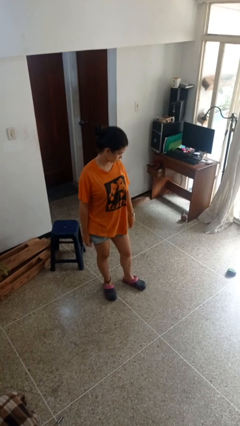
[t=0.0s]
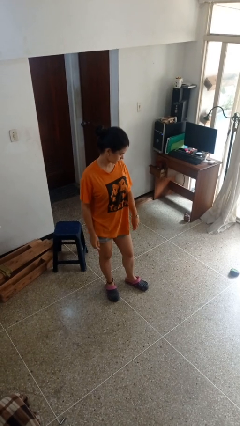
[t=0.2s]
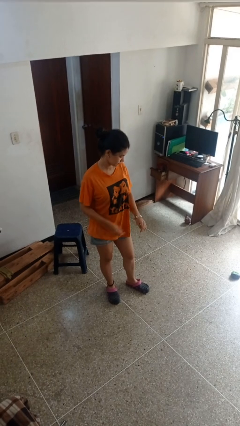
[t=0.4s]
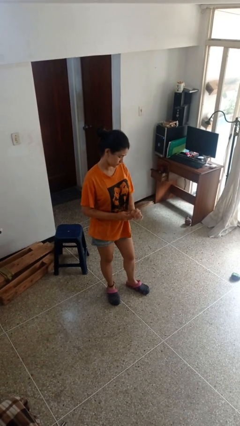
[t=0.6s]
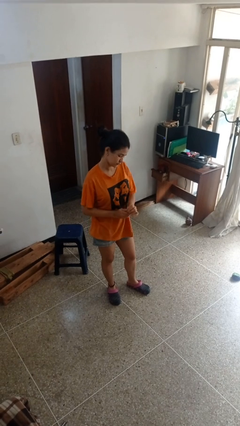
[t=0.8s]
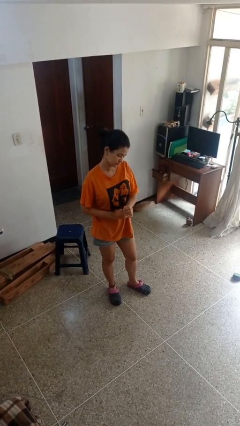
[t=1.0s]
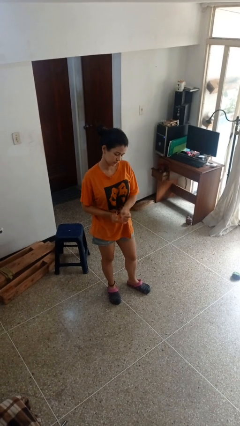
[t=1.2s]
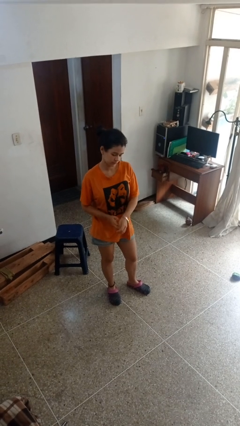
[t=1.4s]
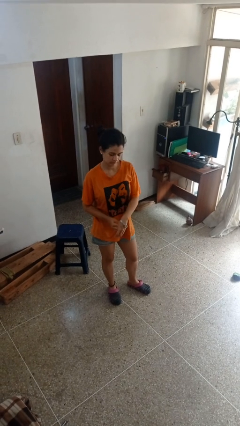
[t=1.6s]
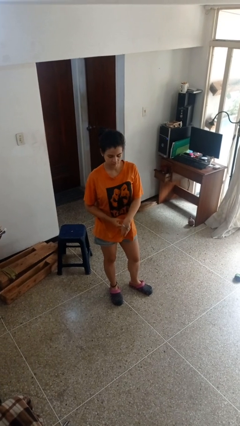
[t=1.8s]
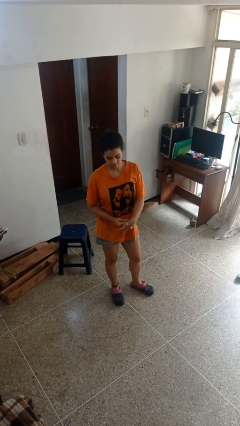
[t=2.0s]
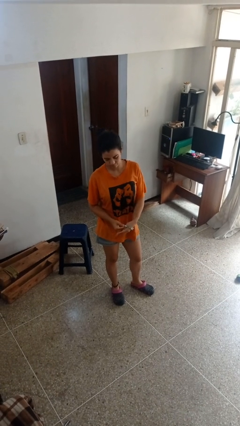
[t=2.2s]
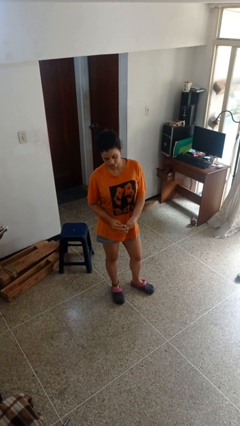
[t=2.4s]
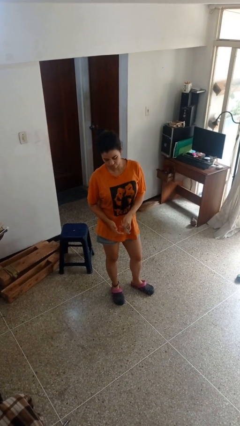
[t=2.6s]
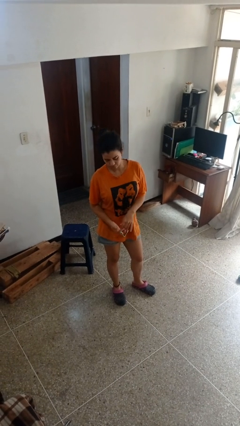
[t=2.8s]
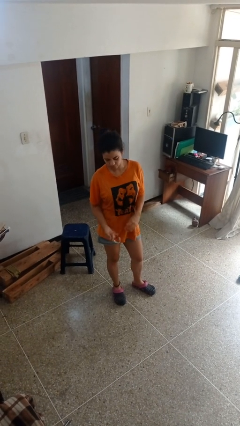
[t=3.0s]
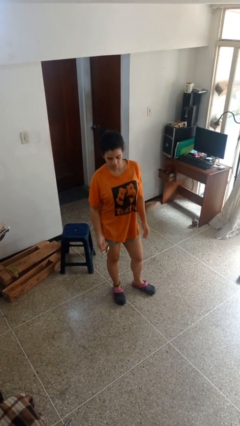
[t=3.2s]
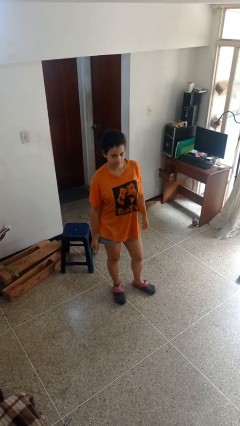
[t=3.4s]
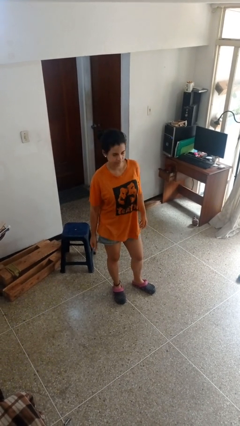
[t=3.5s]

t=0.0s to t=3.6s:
person takes off wristwatch

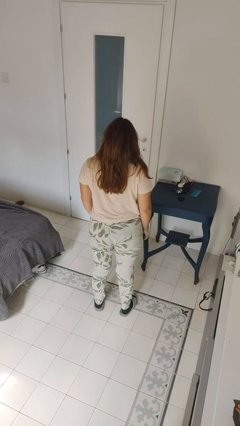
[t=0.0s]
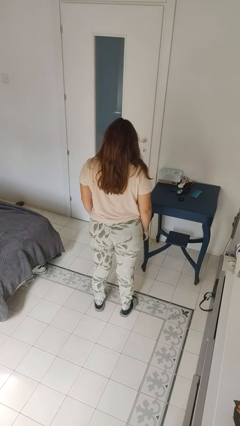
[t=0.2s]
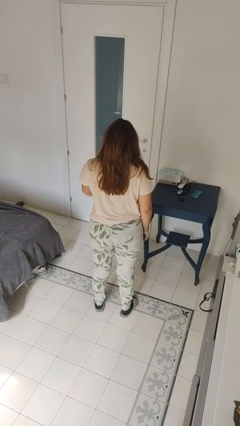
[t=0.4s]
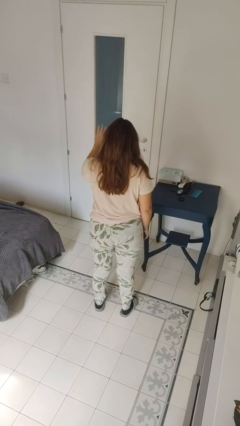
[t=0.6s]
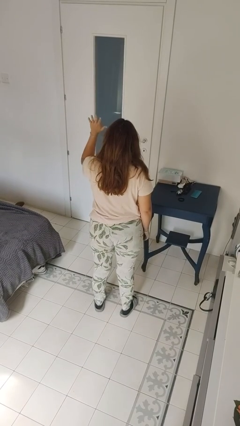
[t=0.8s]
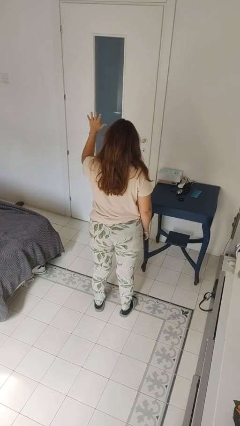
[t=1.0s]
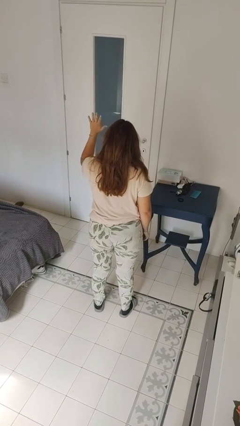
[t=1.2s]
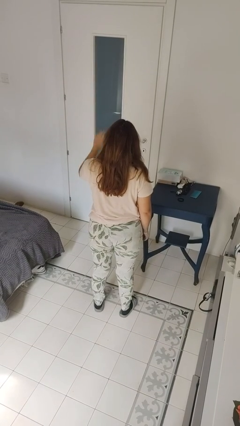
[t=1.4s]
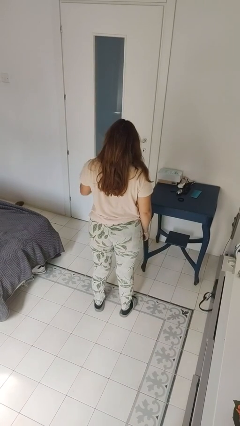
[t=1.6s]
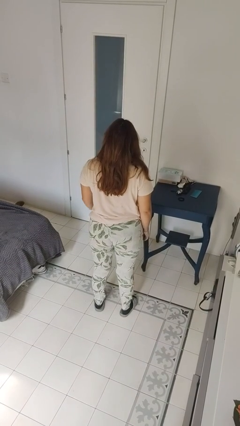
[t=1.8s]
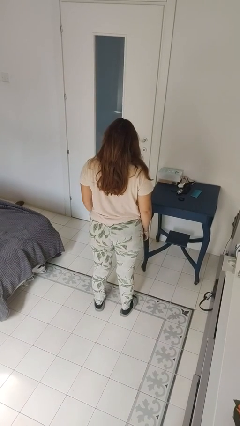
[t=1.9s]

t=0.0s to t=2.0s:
person gestures number five

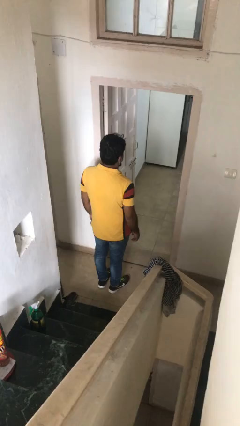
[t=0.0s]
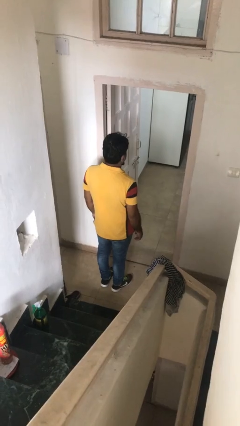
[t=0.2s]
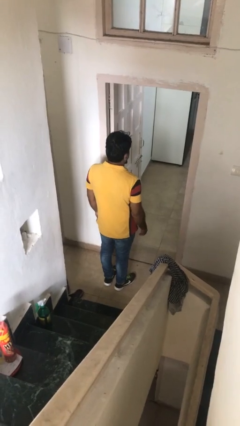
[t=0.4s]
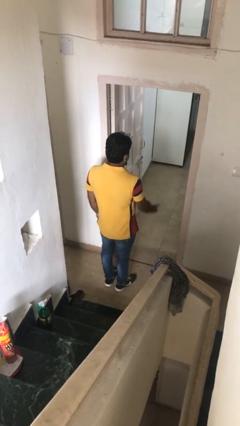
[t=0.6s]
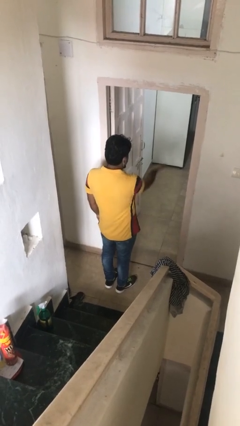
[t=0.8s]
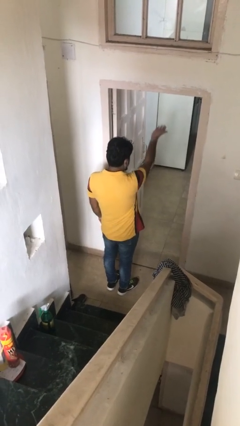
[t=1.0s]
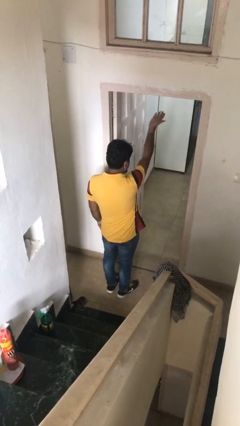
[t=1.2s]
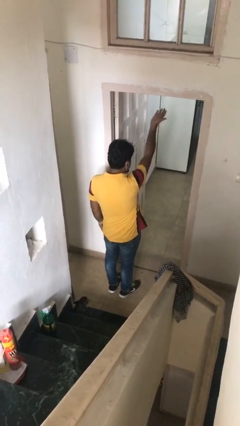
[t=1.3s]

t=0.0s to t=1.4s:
person gestures swipe up

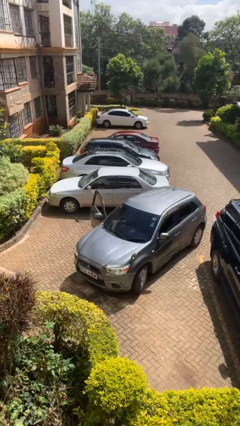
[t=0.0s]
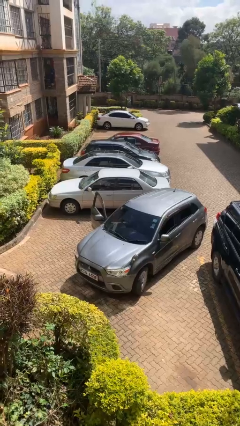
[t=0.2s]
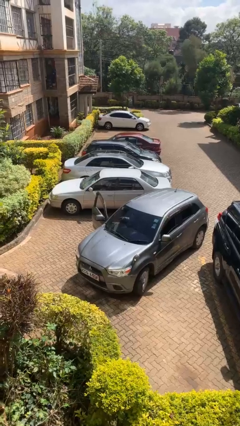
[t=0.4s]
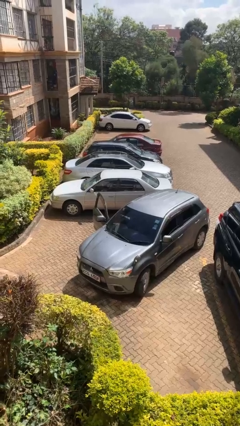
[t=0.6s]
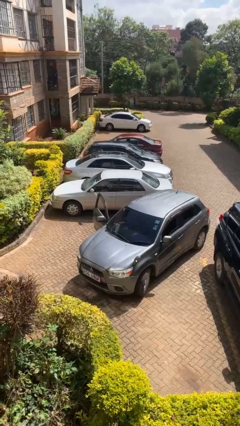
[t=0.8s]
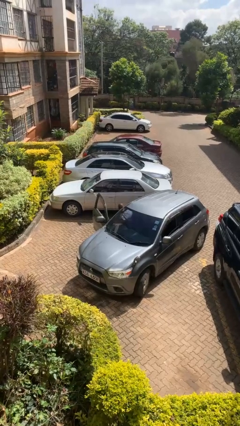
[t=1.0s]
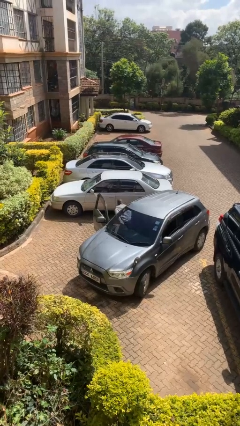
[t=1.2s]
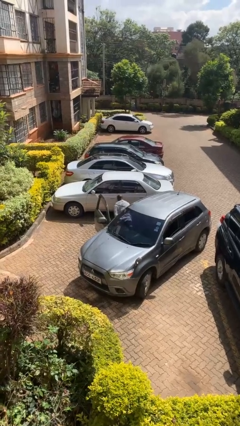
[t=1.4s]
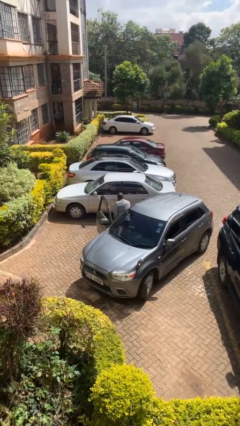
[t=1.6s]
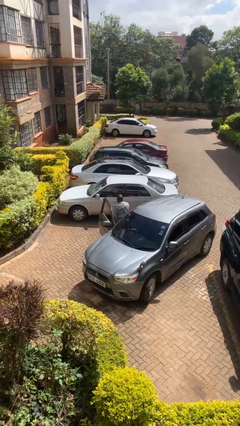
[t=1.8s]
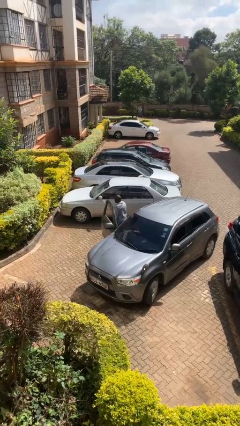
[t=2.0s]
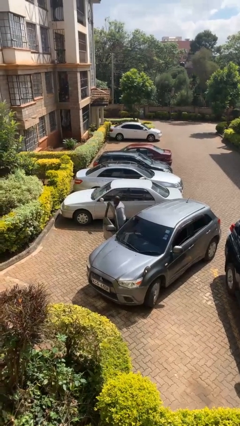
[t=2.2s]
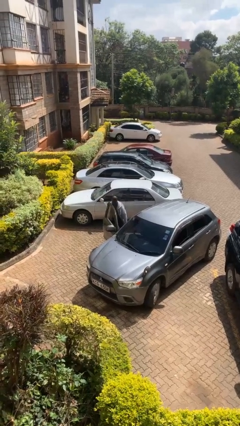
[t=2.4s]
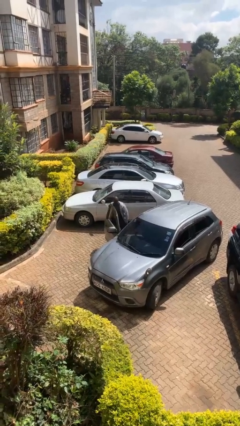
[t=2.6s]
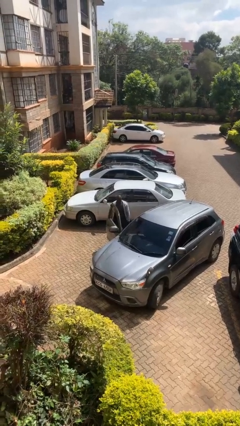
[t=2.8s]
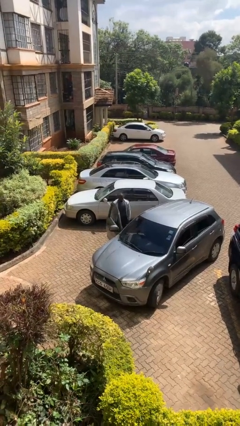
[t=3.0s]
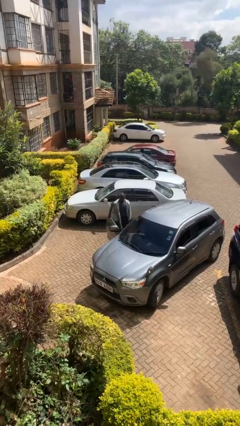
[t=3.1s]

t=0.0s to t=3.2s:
person exits car

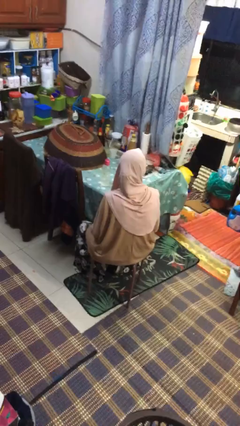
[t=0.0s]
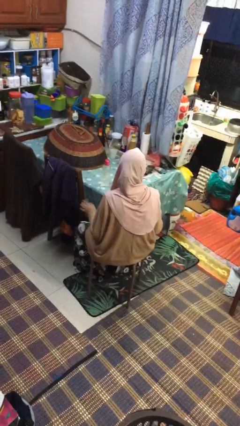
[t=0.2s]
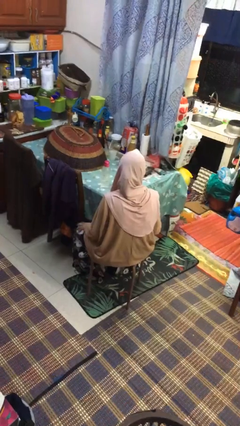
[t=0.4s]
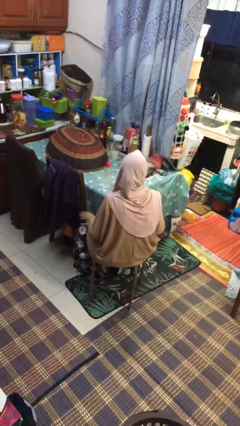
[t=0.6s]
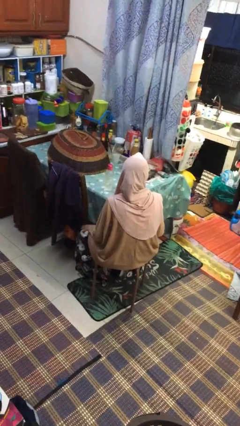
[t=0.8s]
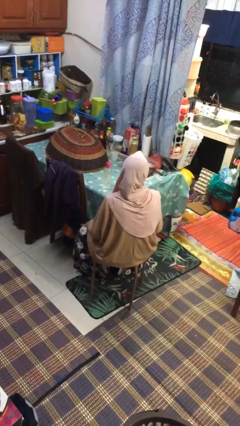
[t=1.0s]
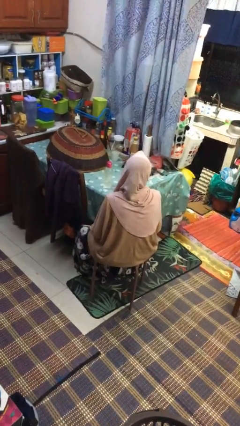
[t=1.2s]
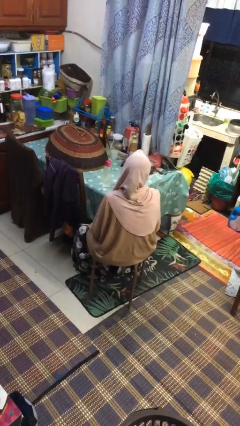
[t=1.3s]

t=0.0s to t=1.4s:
person slaps hands on thighs

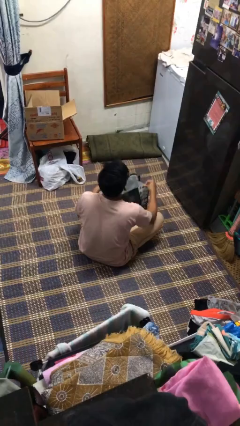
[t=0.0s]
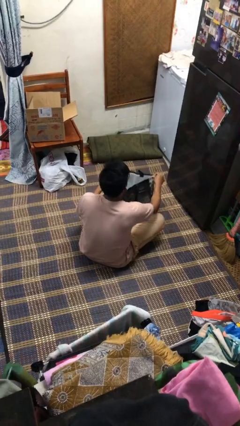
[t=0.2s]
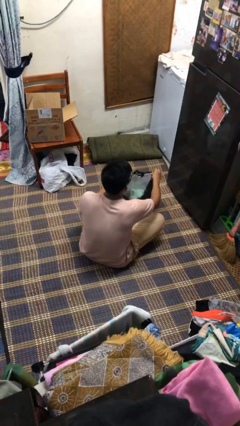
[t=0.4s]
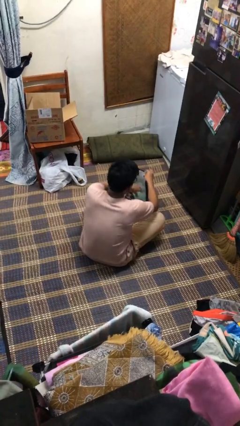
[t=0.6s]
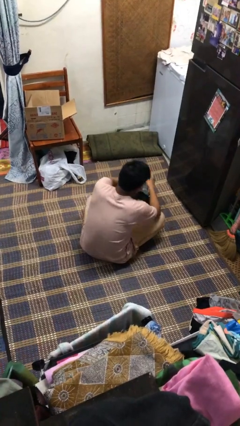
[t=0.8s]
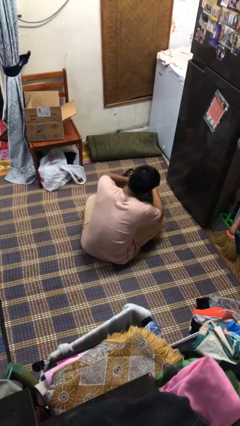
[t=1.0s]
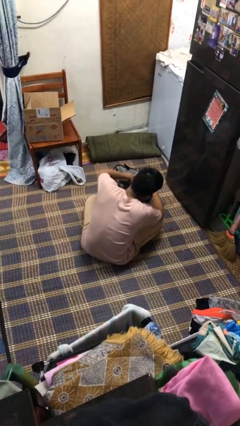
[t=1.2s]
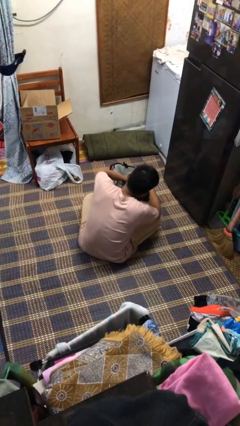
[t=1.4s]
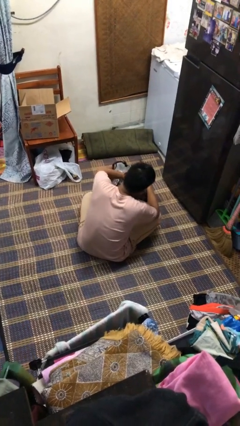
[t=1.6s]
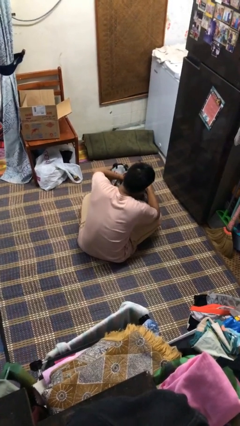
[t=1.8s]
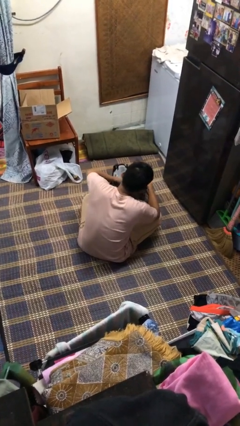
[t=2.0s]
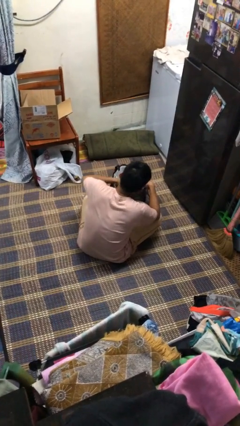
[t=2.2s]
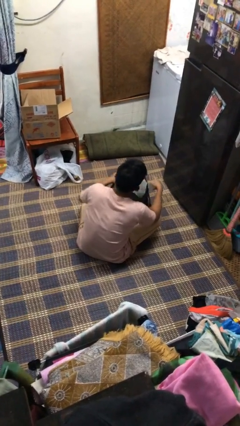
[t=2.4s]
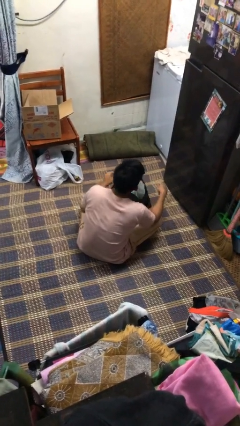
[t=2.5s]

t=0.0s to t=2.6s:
person searches in bag

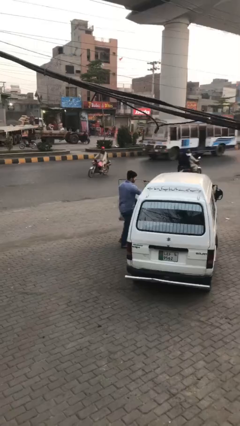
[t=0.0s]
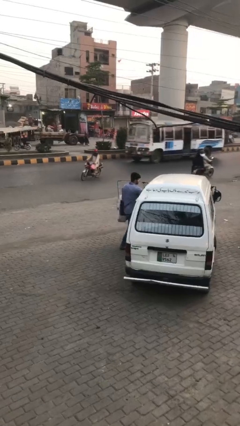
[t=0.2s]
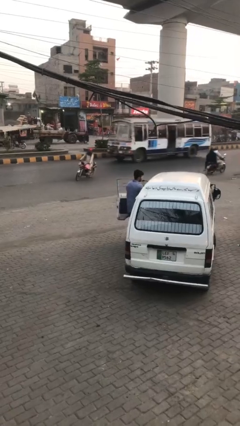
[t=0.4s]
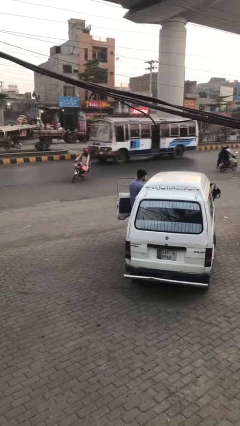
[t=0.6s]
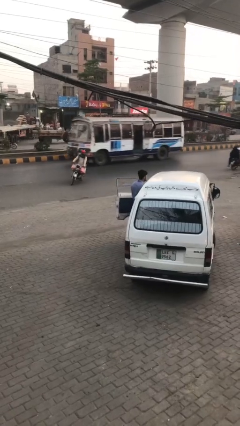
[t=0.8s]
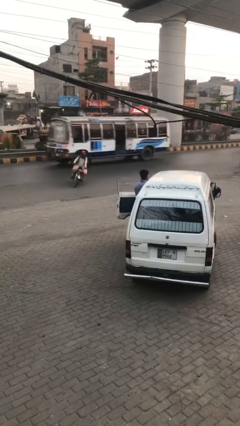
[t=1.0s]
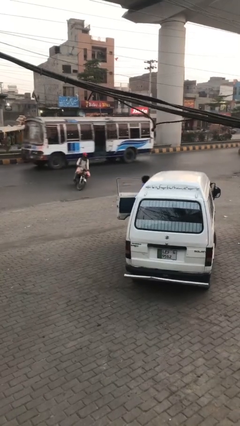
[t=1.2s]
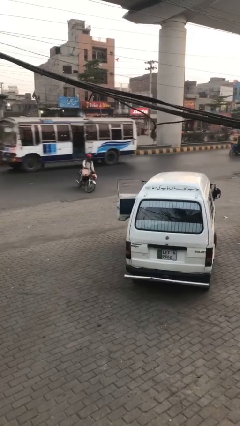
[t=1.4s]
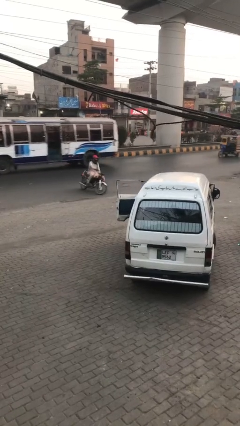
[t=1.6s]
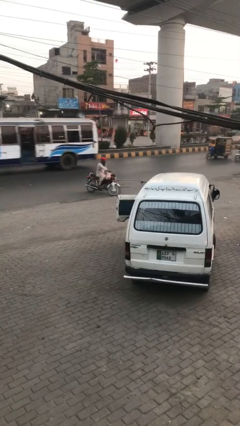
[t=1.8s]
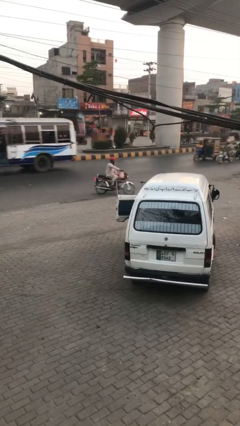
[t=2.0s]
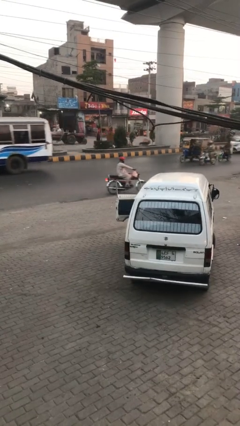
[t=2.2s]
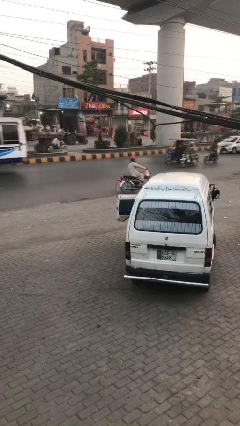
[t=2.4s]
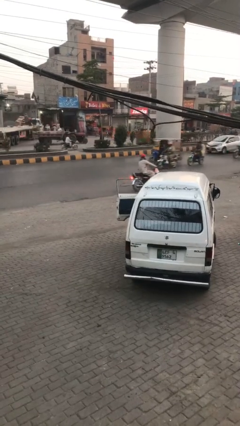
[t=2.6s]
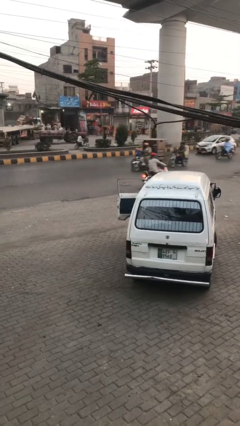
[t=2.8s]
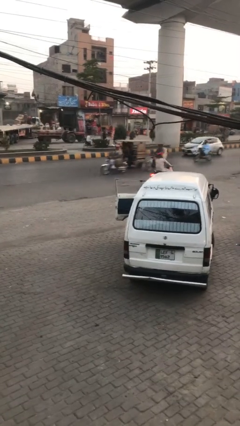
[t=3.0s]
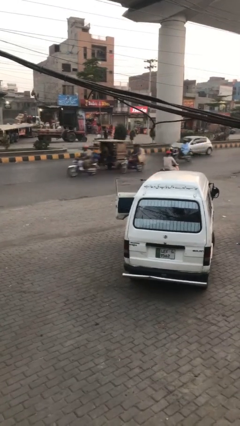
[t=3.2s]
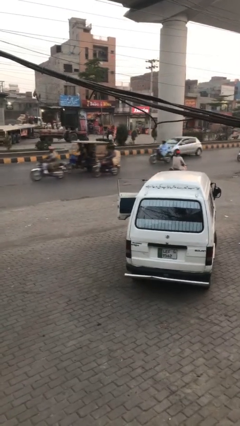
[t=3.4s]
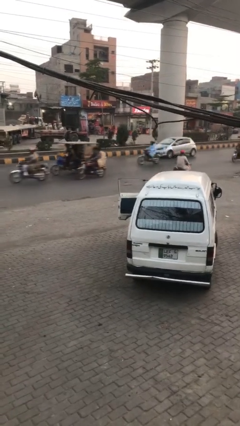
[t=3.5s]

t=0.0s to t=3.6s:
person enters car
